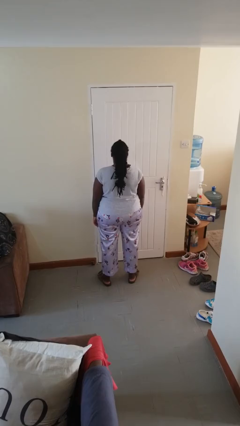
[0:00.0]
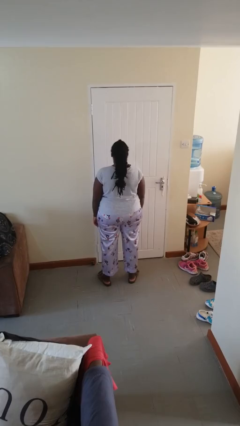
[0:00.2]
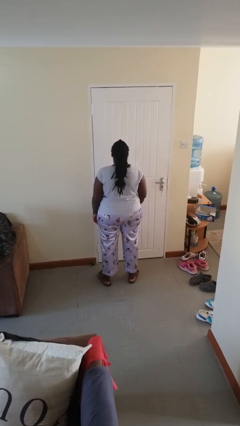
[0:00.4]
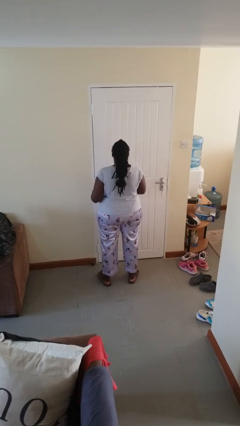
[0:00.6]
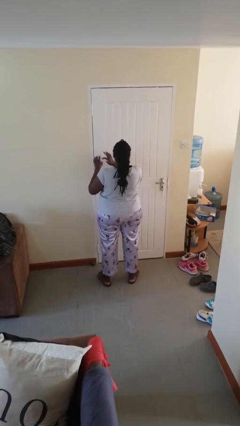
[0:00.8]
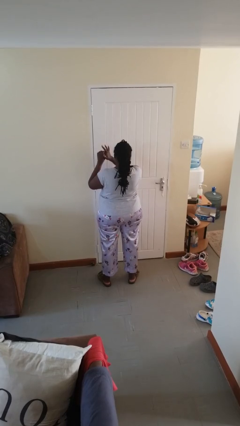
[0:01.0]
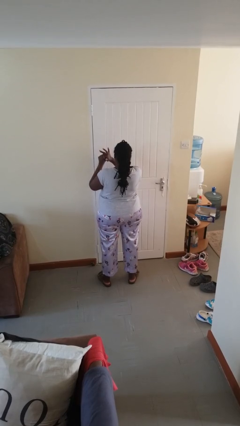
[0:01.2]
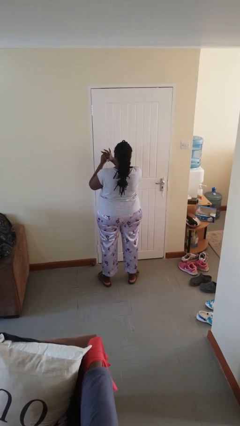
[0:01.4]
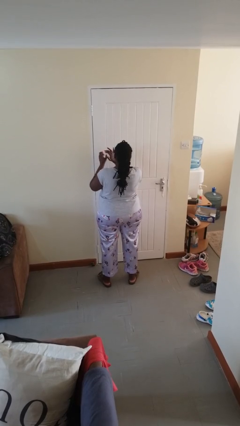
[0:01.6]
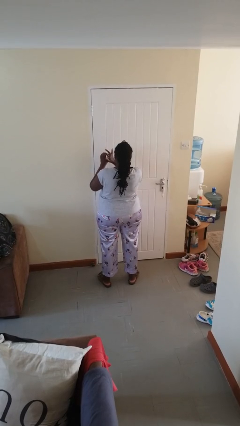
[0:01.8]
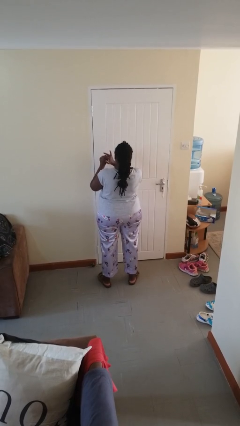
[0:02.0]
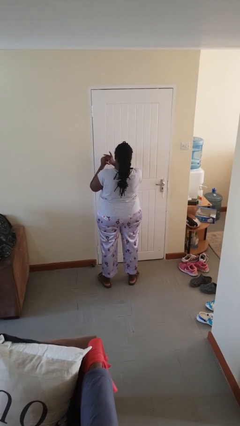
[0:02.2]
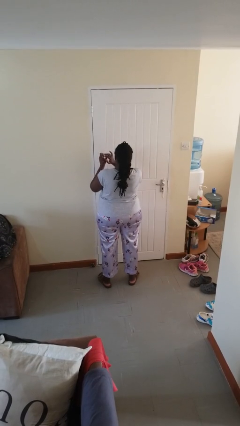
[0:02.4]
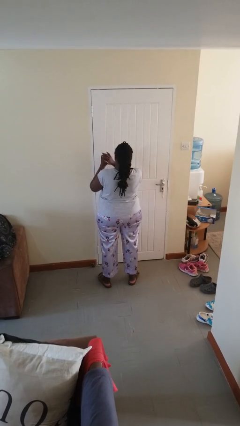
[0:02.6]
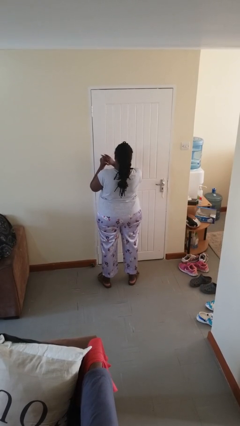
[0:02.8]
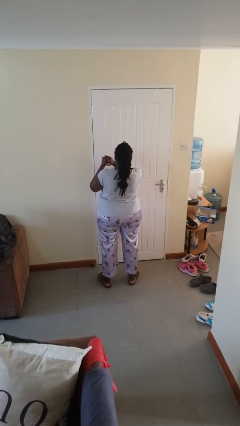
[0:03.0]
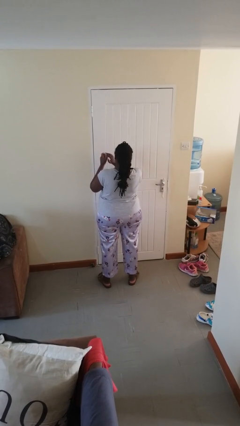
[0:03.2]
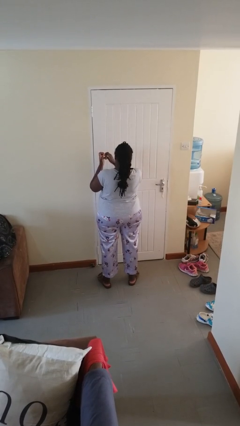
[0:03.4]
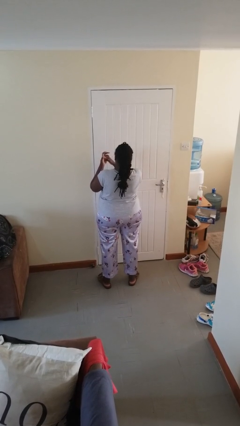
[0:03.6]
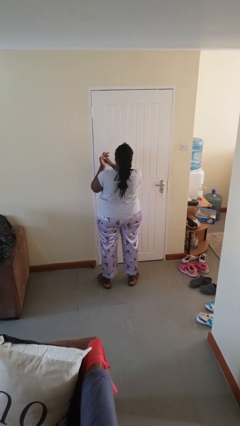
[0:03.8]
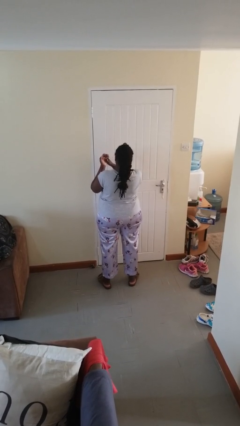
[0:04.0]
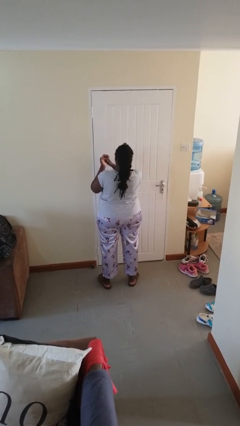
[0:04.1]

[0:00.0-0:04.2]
person cracks knuckles
